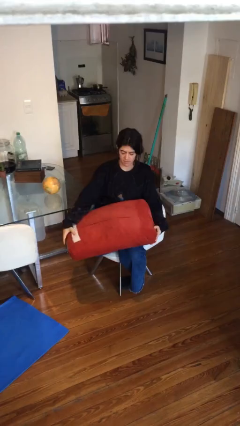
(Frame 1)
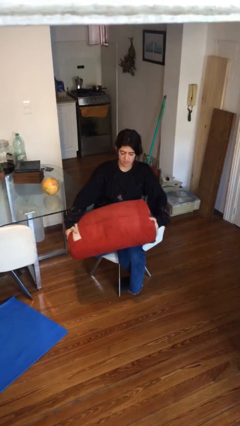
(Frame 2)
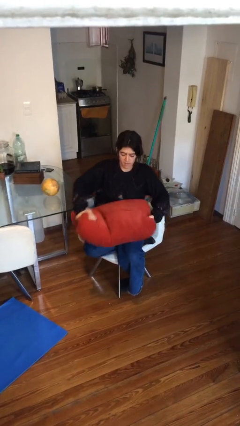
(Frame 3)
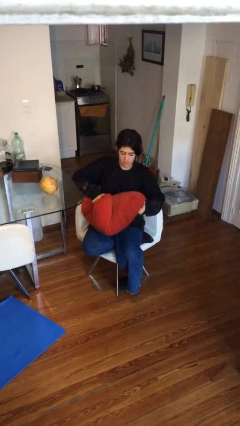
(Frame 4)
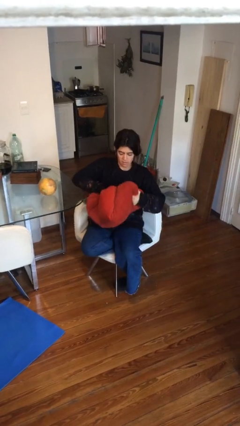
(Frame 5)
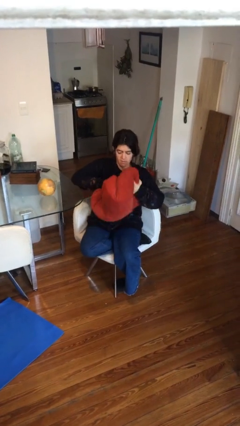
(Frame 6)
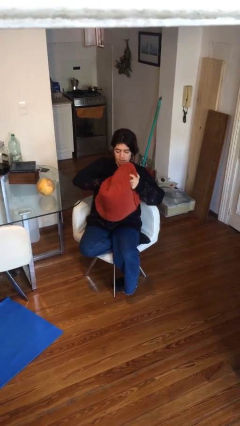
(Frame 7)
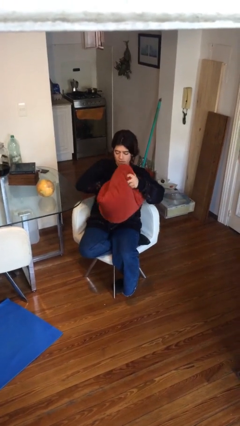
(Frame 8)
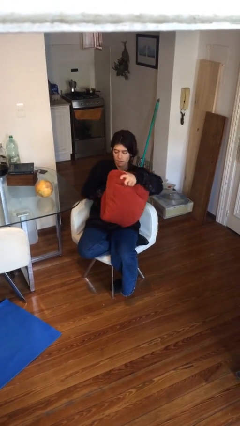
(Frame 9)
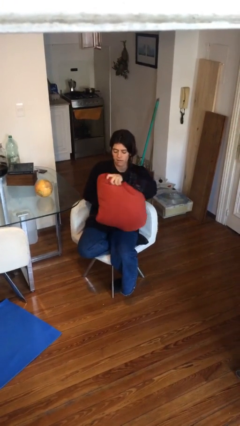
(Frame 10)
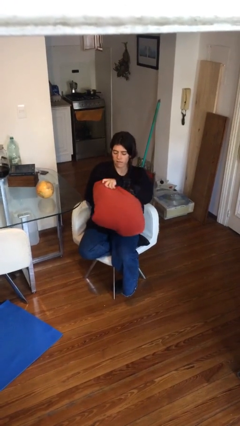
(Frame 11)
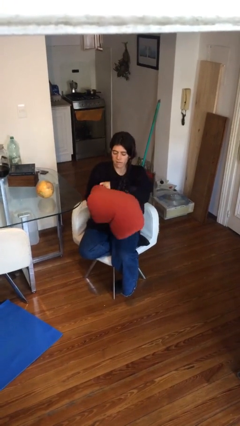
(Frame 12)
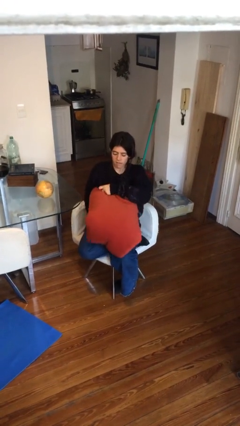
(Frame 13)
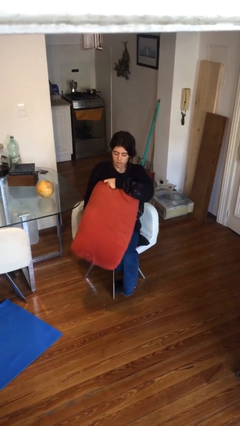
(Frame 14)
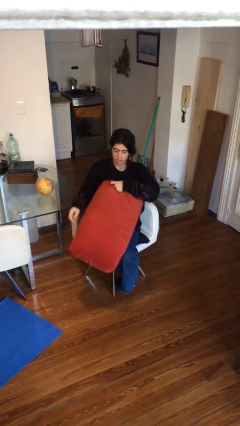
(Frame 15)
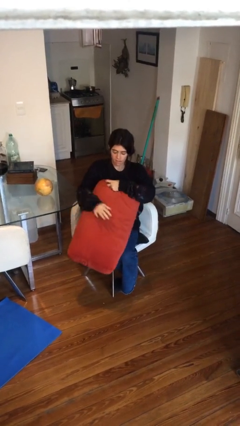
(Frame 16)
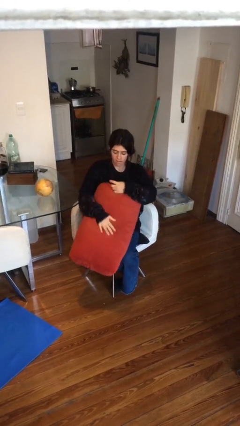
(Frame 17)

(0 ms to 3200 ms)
person squeezes object

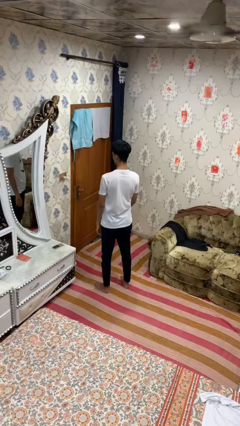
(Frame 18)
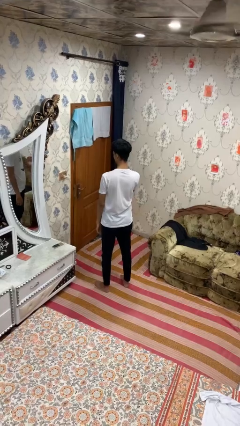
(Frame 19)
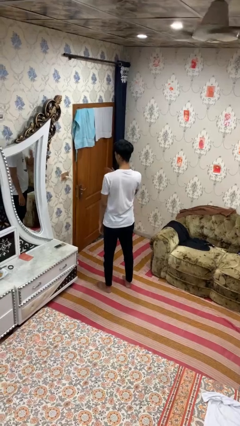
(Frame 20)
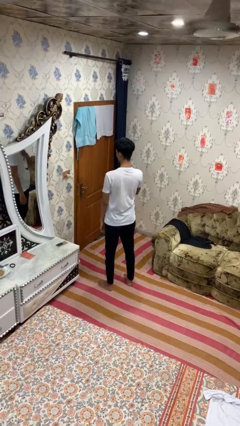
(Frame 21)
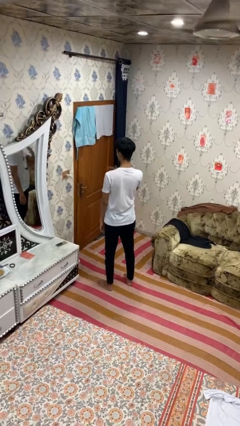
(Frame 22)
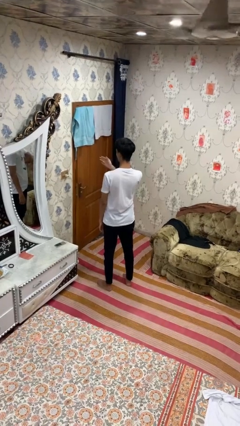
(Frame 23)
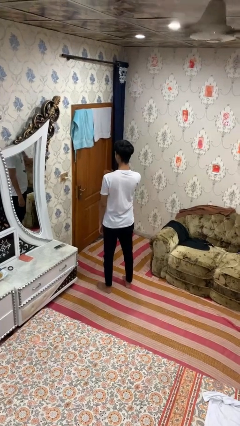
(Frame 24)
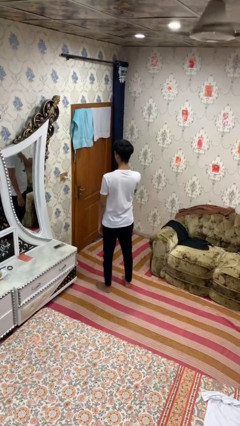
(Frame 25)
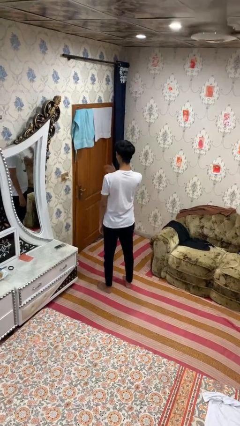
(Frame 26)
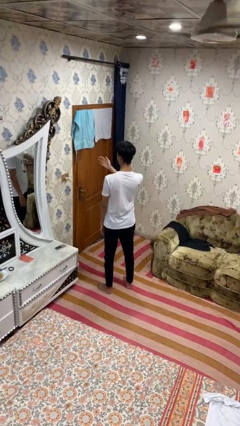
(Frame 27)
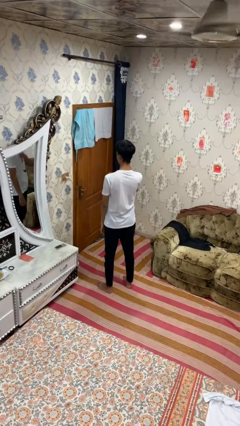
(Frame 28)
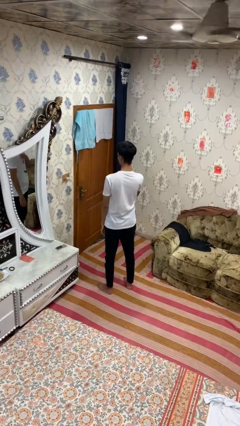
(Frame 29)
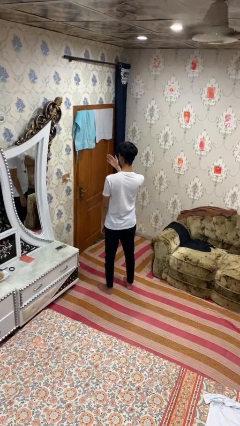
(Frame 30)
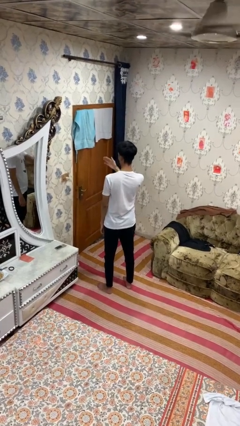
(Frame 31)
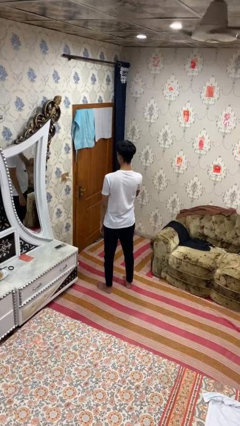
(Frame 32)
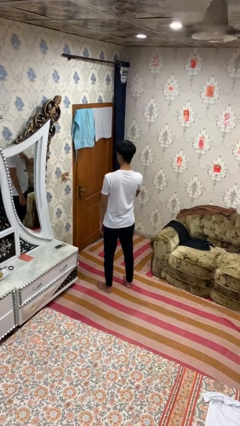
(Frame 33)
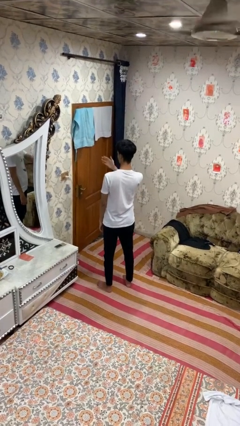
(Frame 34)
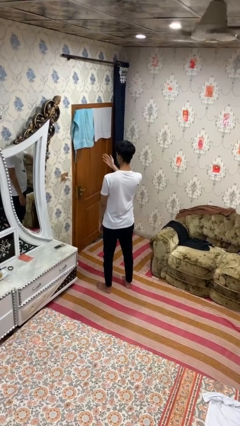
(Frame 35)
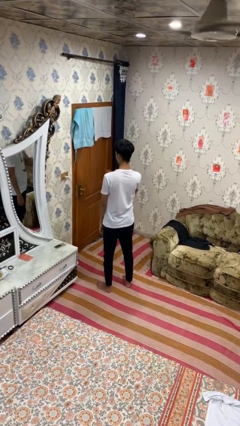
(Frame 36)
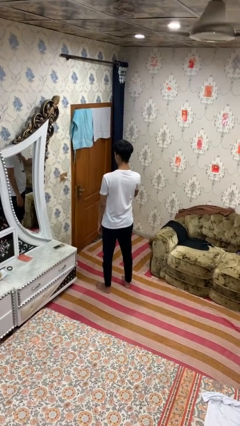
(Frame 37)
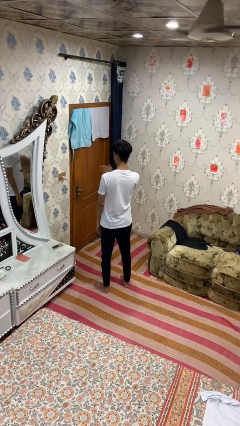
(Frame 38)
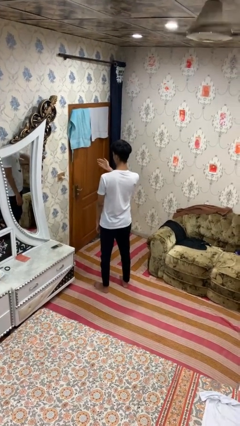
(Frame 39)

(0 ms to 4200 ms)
person drums on chest

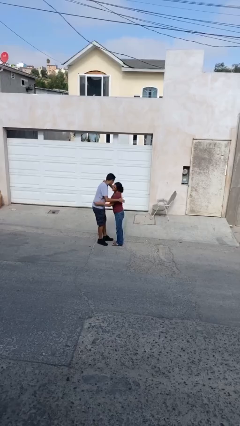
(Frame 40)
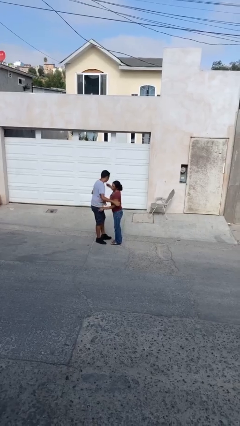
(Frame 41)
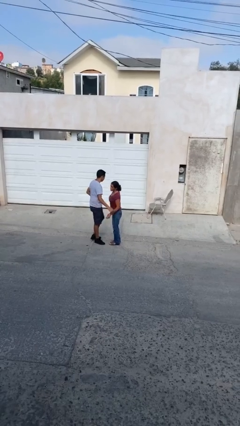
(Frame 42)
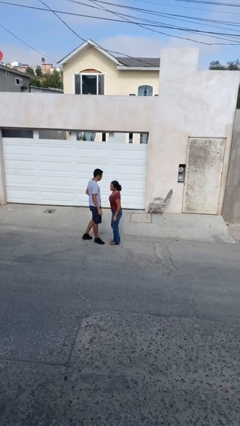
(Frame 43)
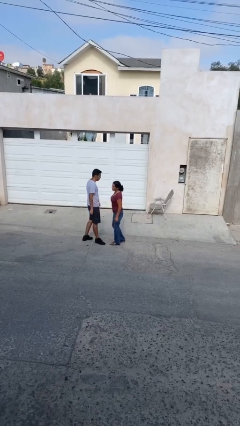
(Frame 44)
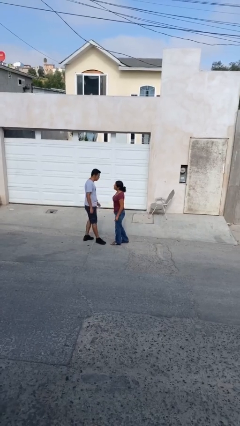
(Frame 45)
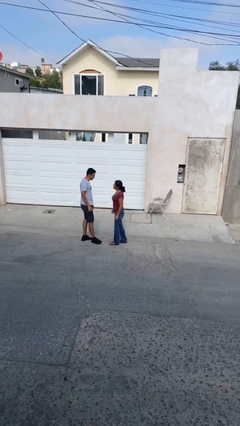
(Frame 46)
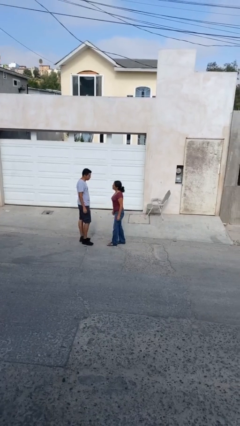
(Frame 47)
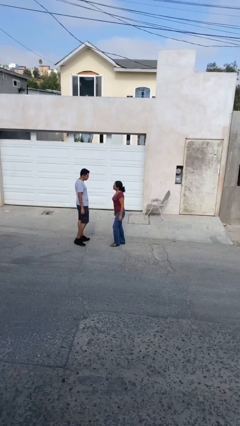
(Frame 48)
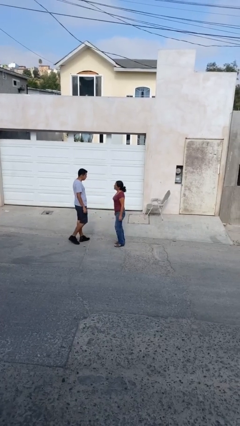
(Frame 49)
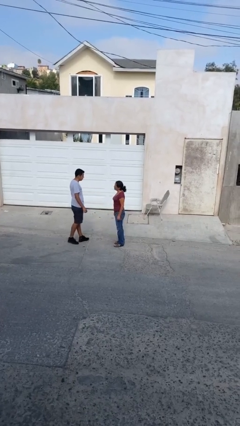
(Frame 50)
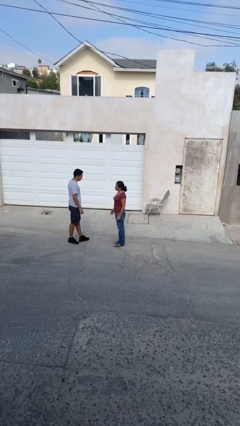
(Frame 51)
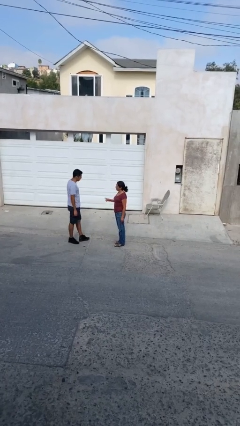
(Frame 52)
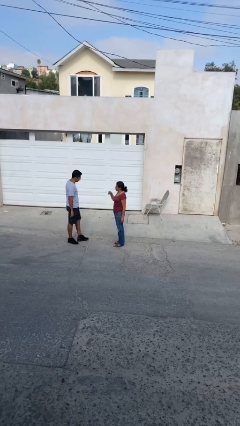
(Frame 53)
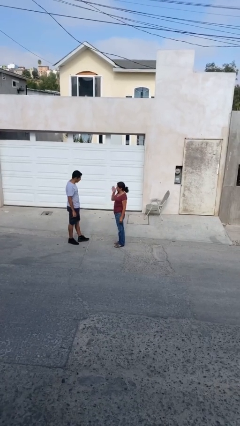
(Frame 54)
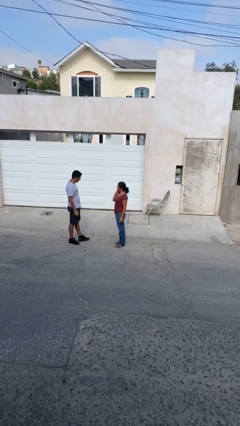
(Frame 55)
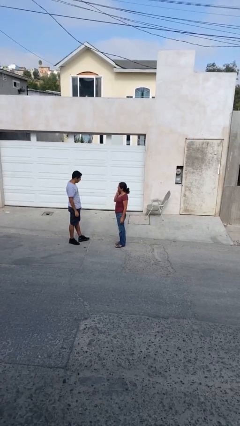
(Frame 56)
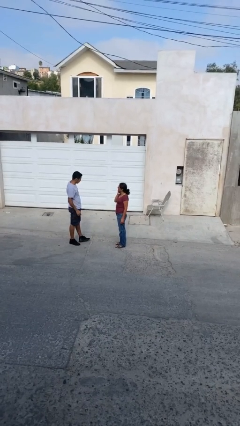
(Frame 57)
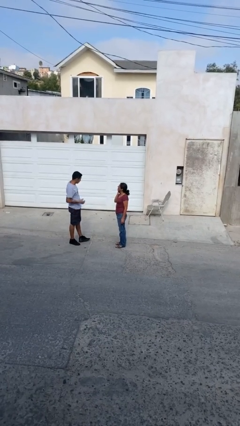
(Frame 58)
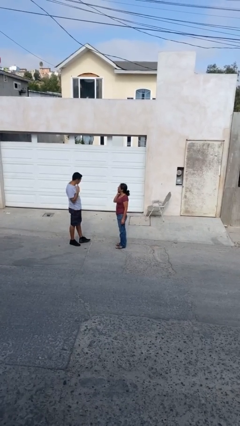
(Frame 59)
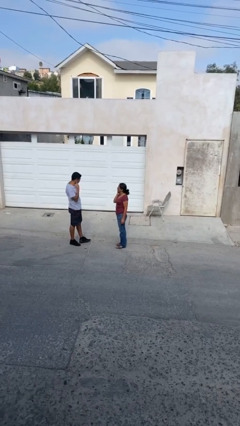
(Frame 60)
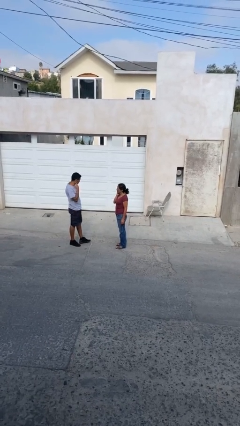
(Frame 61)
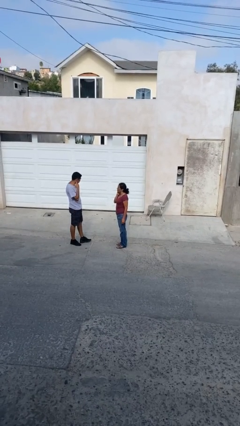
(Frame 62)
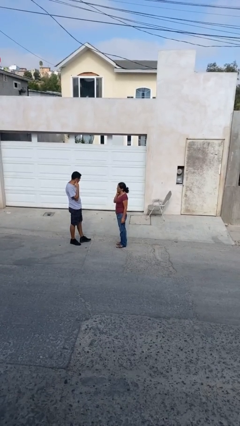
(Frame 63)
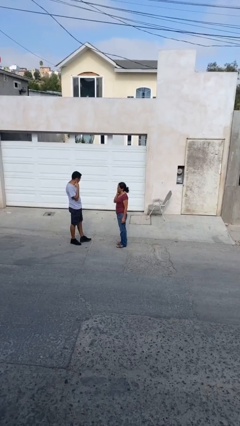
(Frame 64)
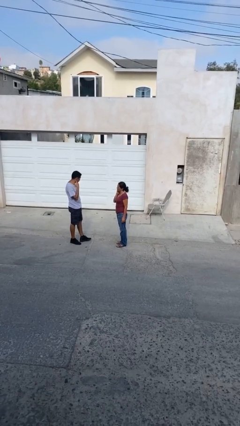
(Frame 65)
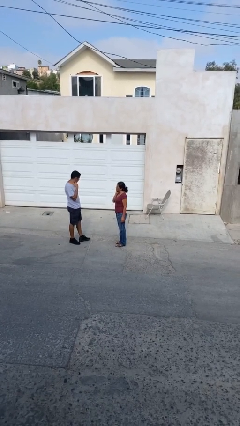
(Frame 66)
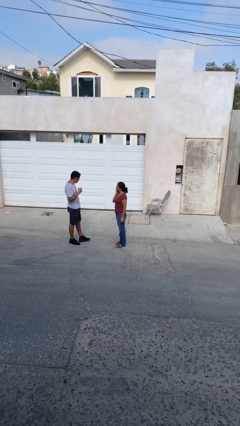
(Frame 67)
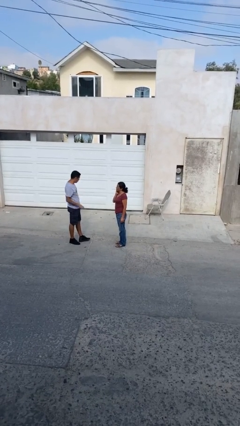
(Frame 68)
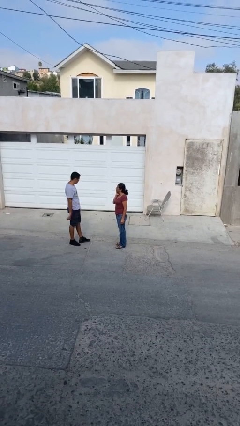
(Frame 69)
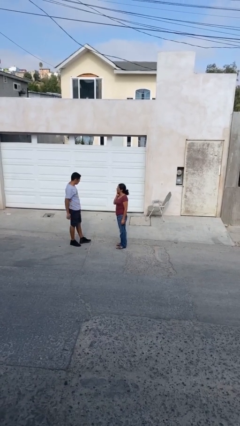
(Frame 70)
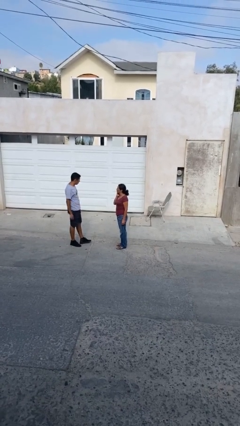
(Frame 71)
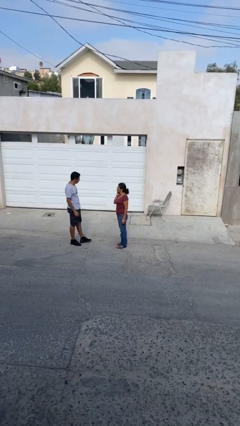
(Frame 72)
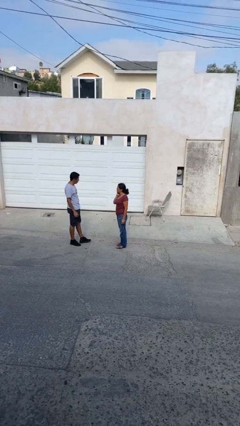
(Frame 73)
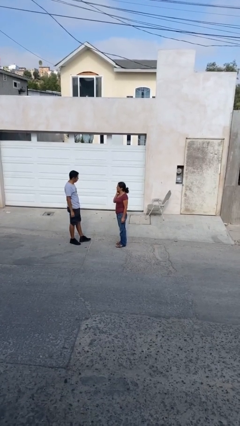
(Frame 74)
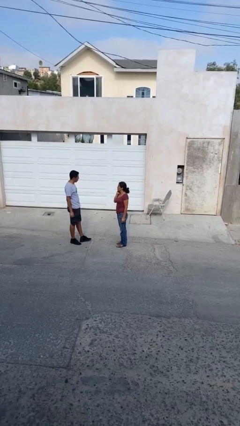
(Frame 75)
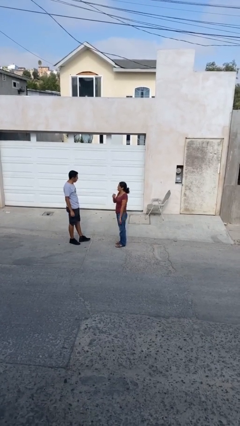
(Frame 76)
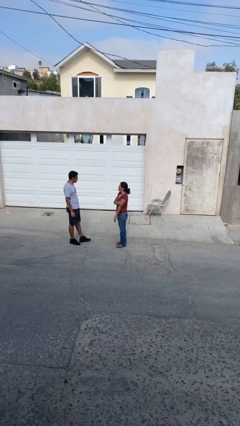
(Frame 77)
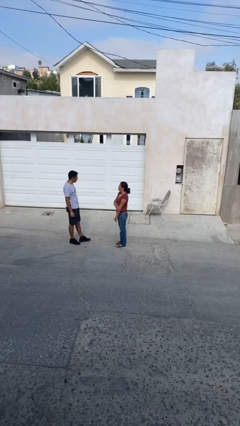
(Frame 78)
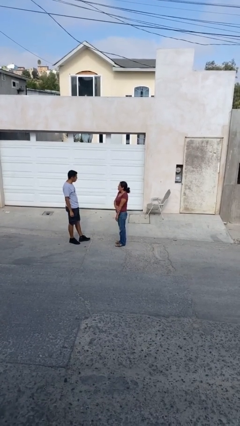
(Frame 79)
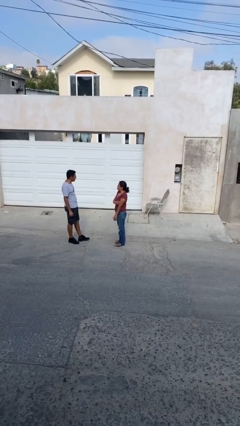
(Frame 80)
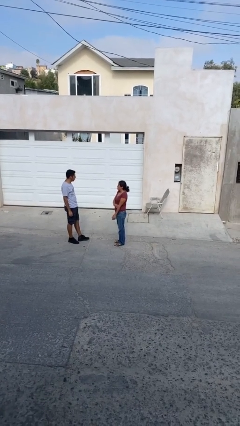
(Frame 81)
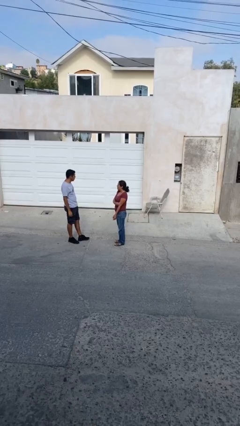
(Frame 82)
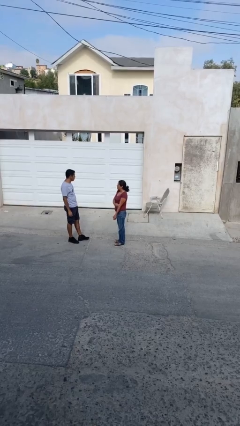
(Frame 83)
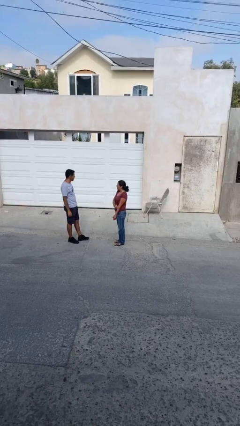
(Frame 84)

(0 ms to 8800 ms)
person talks to person

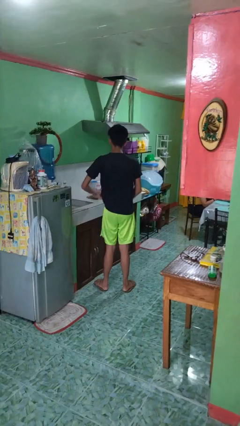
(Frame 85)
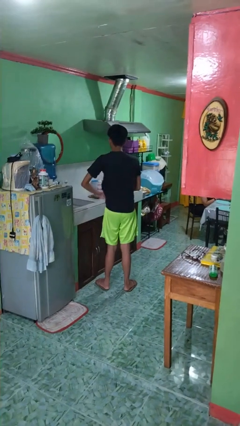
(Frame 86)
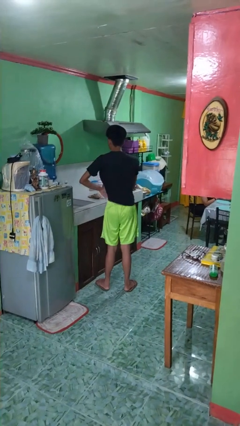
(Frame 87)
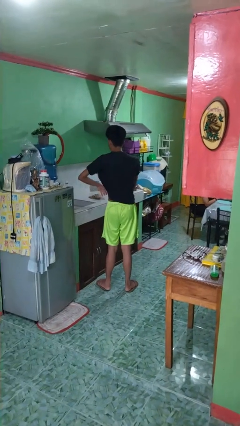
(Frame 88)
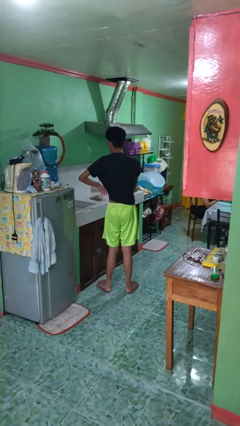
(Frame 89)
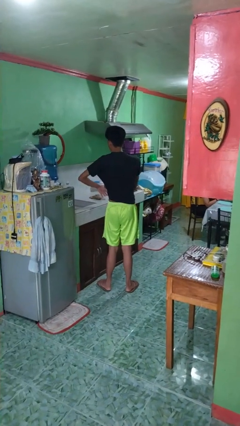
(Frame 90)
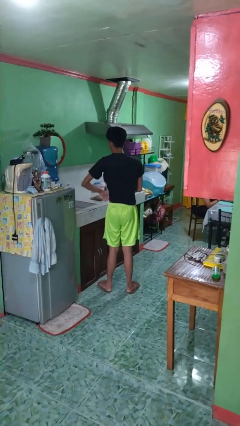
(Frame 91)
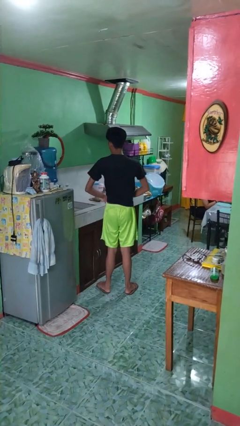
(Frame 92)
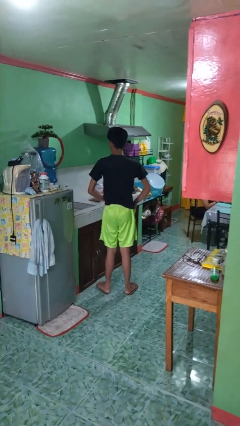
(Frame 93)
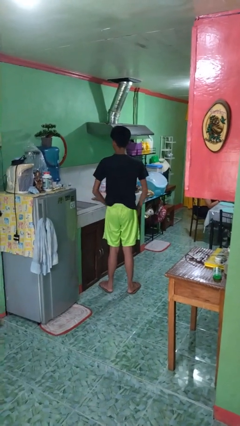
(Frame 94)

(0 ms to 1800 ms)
person applies deodorant
